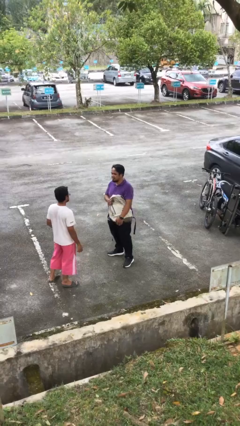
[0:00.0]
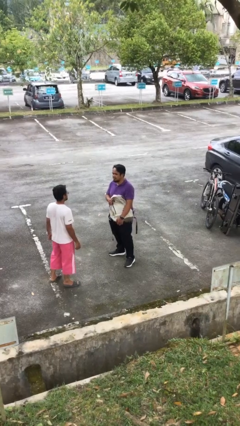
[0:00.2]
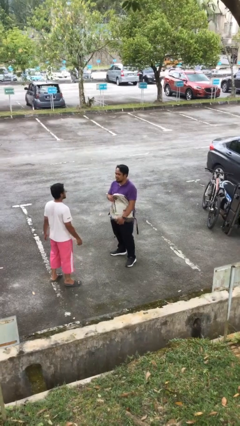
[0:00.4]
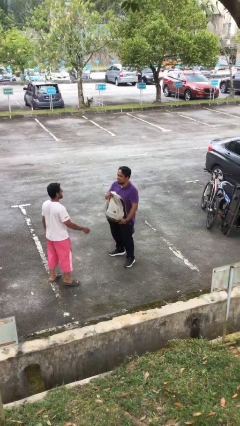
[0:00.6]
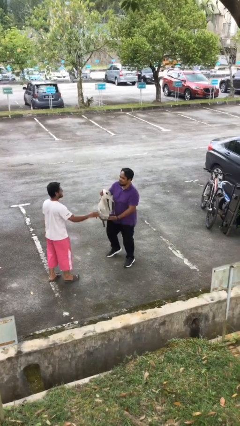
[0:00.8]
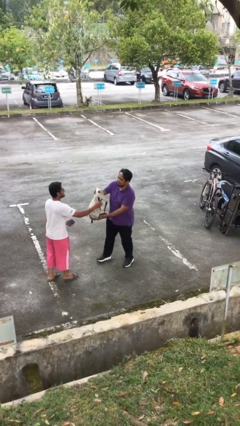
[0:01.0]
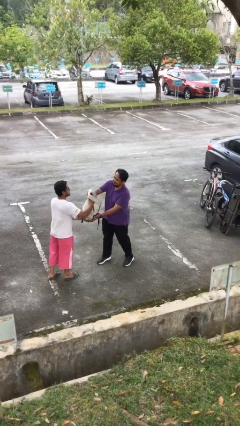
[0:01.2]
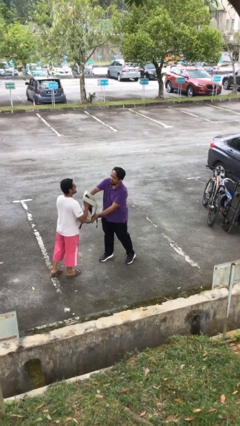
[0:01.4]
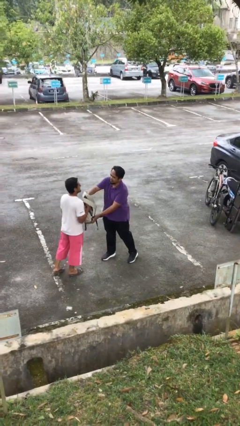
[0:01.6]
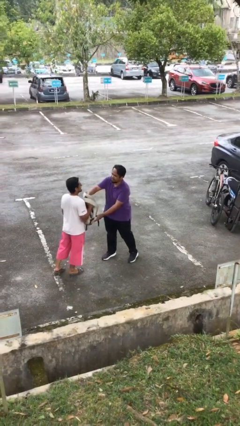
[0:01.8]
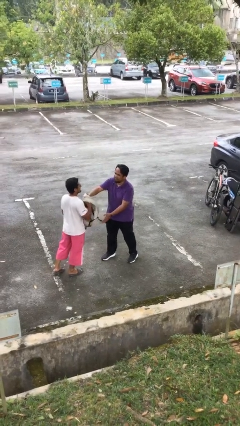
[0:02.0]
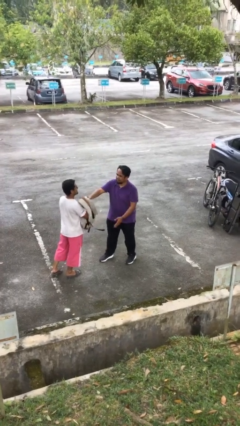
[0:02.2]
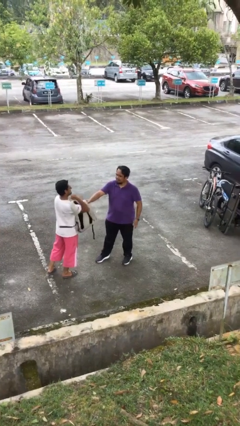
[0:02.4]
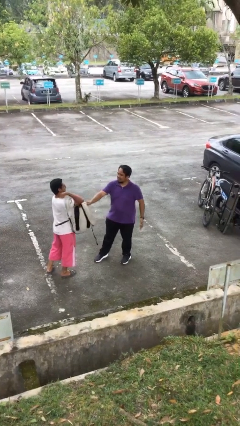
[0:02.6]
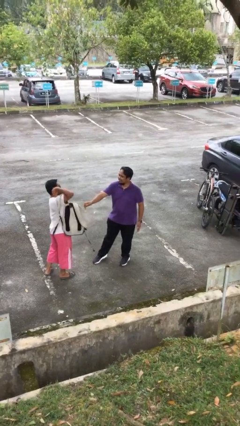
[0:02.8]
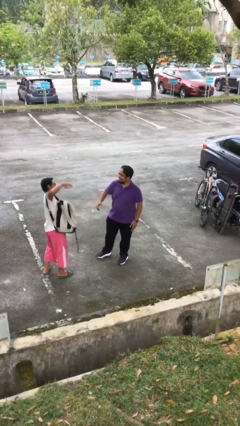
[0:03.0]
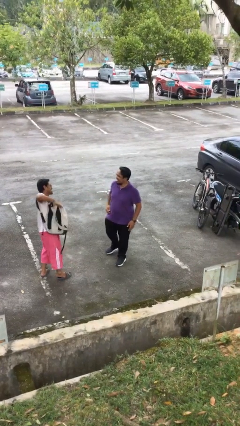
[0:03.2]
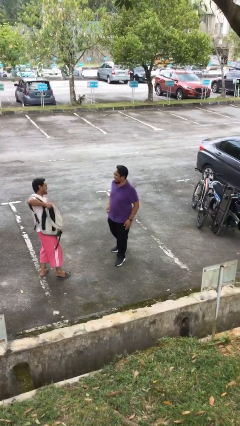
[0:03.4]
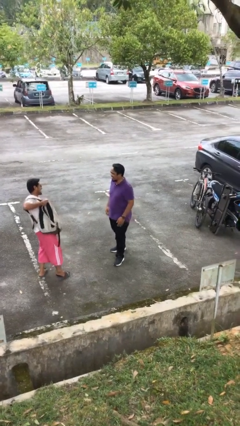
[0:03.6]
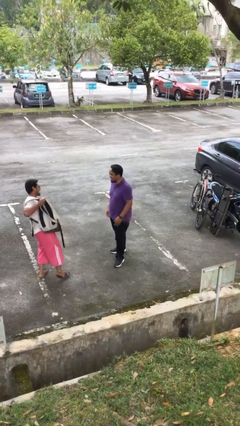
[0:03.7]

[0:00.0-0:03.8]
person transfers object to person

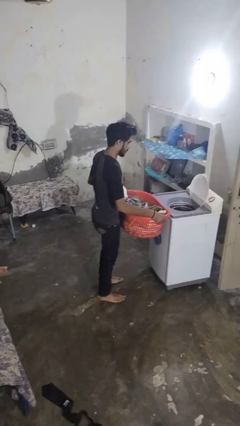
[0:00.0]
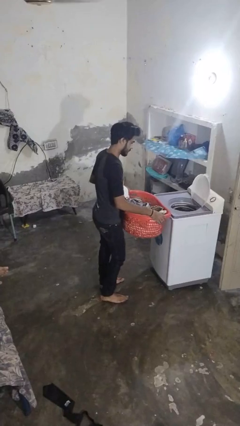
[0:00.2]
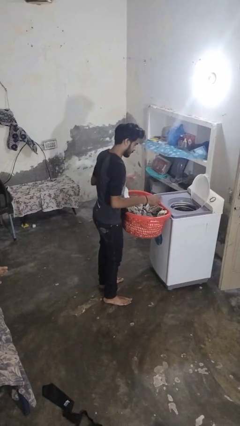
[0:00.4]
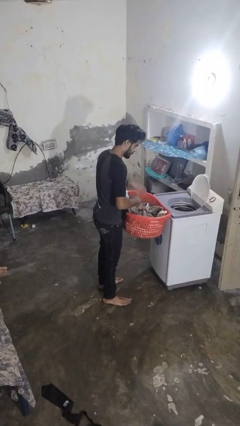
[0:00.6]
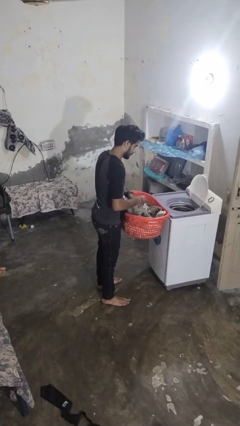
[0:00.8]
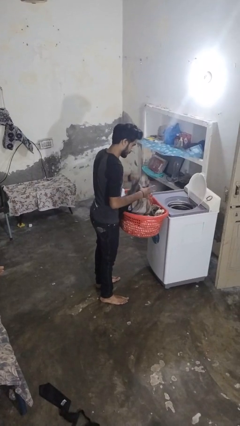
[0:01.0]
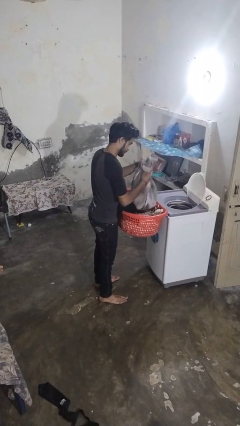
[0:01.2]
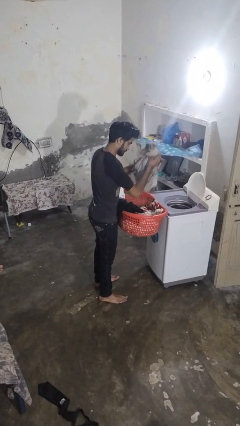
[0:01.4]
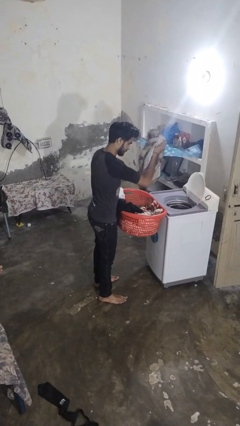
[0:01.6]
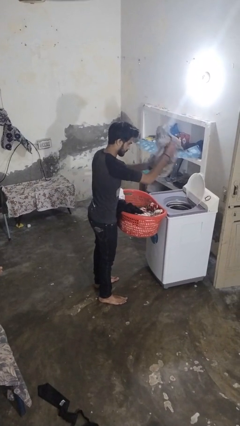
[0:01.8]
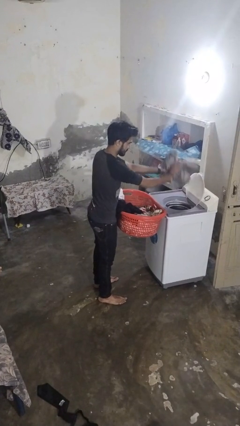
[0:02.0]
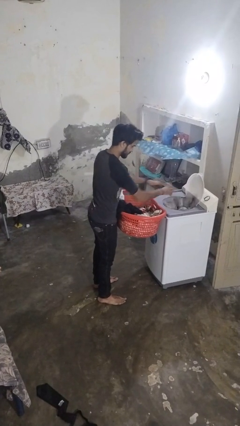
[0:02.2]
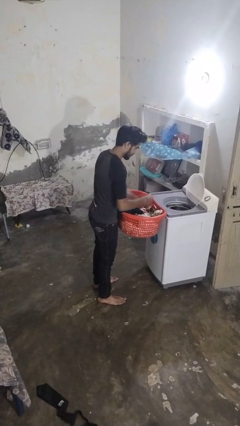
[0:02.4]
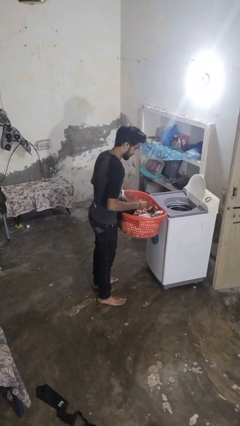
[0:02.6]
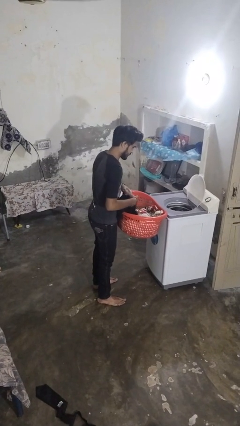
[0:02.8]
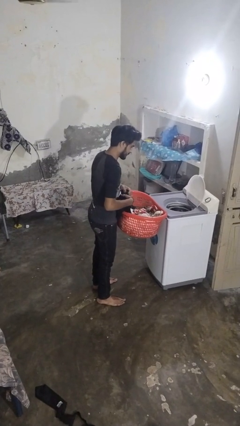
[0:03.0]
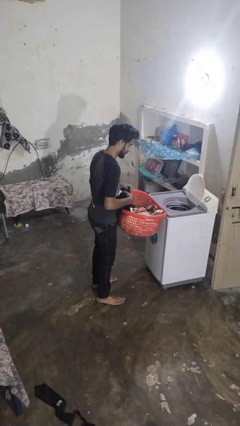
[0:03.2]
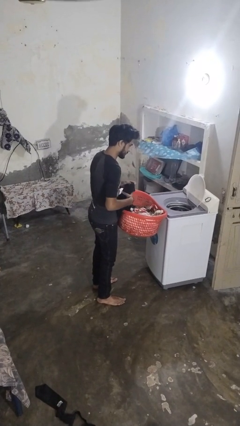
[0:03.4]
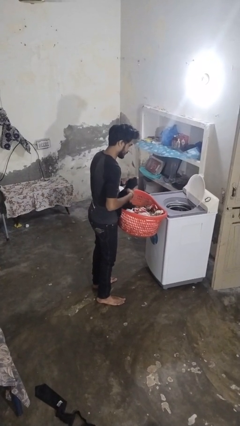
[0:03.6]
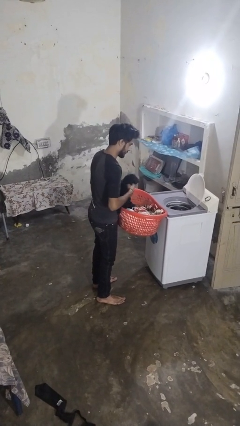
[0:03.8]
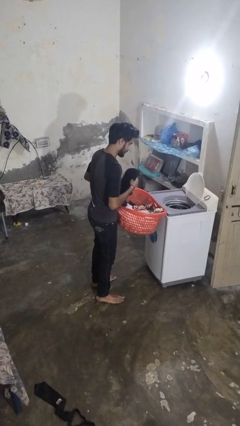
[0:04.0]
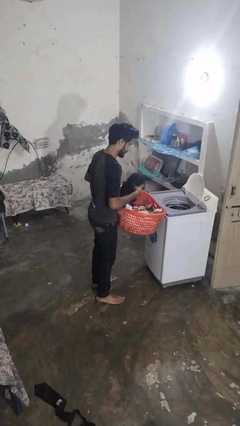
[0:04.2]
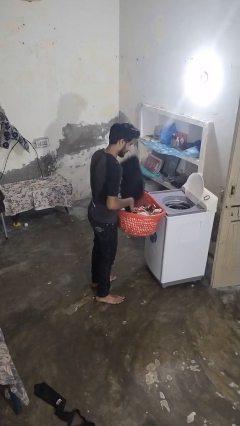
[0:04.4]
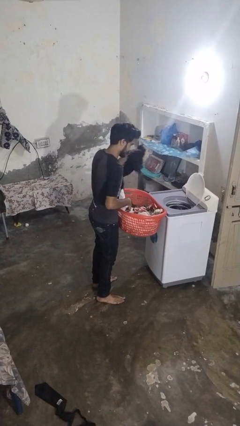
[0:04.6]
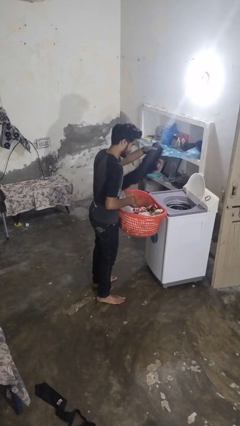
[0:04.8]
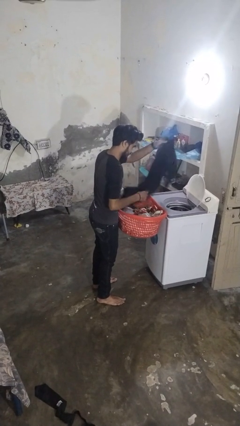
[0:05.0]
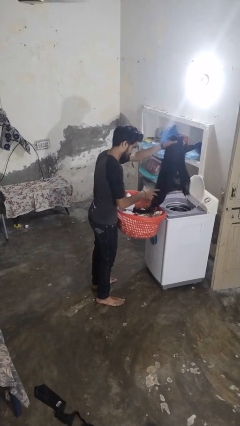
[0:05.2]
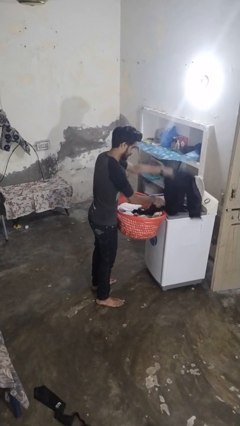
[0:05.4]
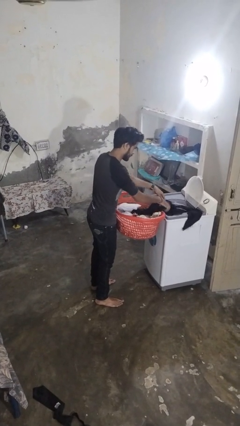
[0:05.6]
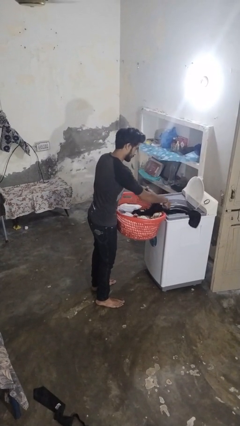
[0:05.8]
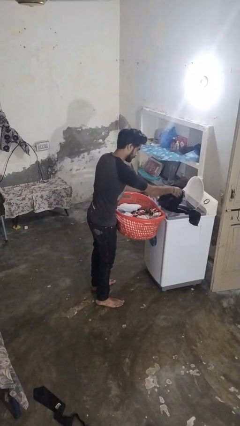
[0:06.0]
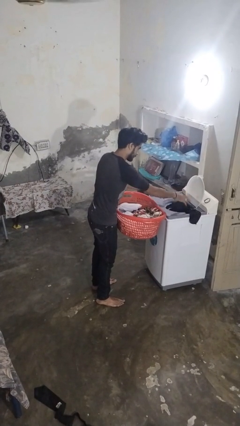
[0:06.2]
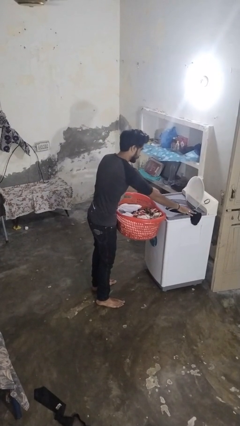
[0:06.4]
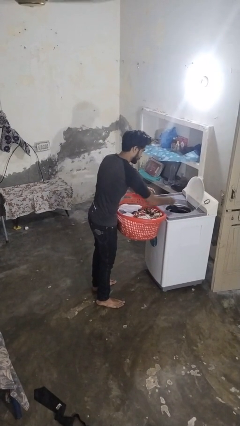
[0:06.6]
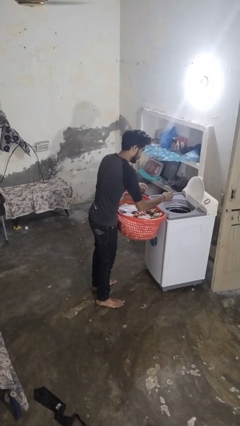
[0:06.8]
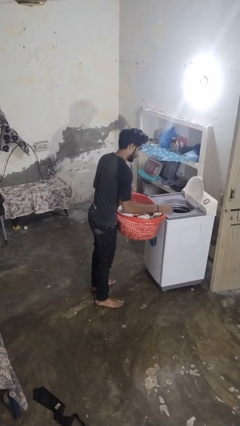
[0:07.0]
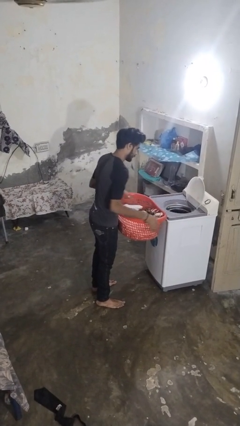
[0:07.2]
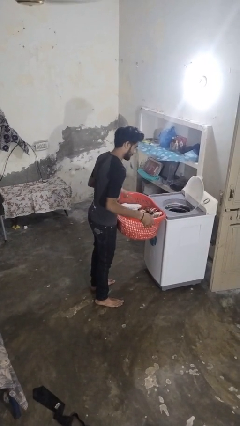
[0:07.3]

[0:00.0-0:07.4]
person loads dryer

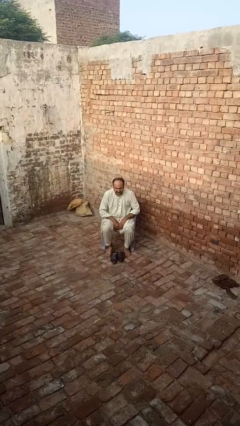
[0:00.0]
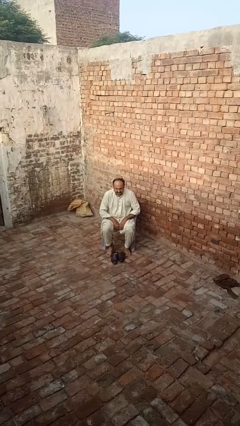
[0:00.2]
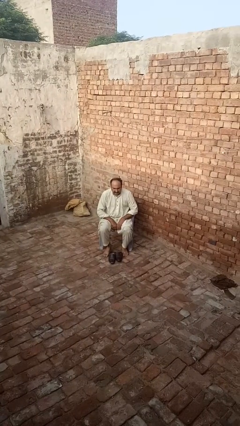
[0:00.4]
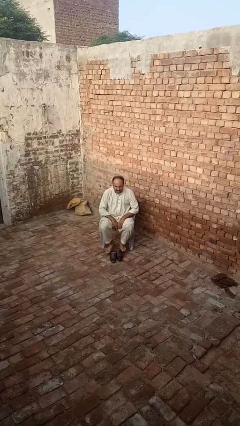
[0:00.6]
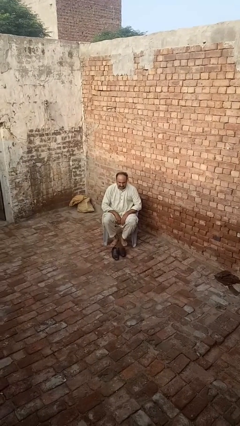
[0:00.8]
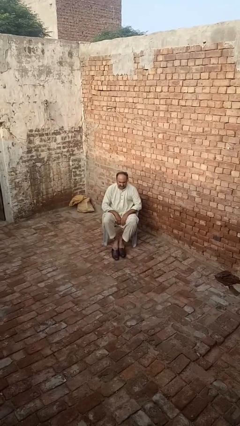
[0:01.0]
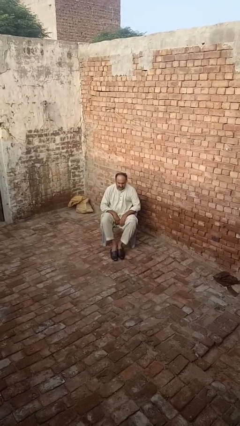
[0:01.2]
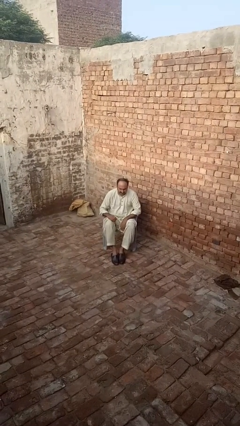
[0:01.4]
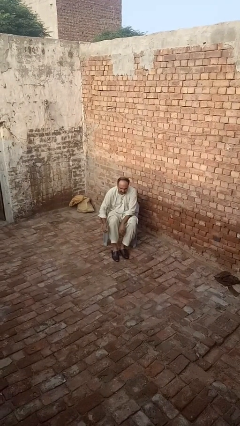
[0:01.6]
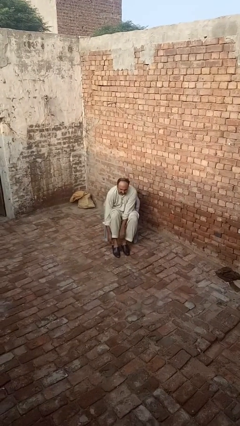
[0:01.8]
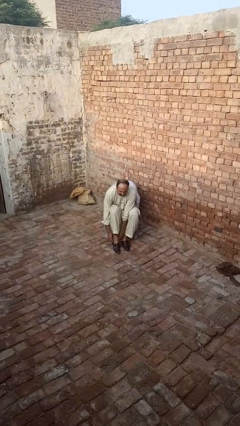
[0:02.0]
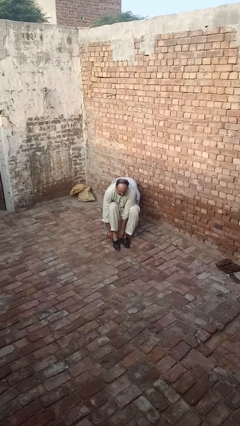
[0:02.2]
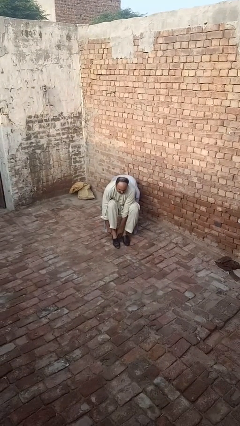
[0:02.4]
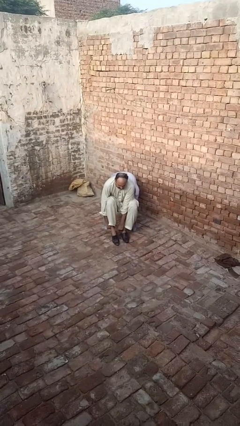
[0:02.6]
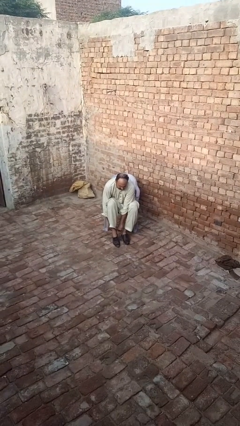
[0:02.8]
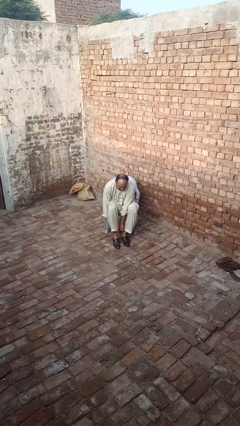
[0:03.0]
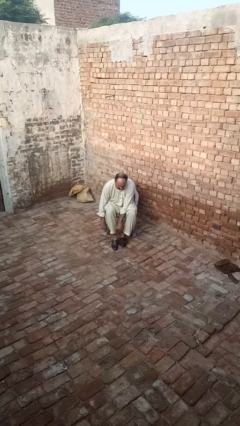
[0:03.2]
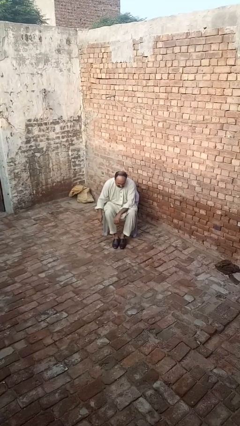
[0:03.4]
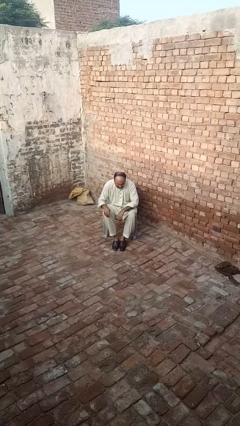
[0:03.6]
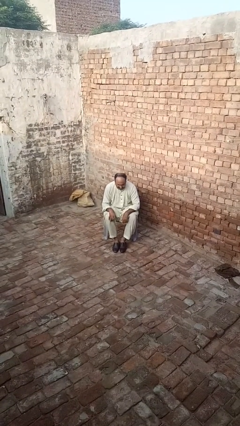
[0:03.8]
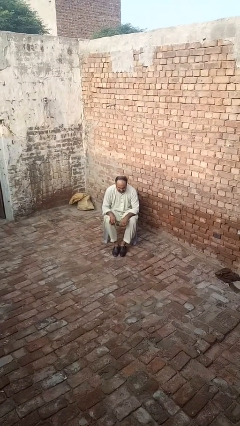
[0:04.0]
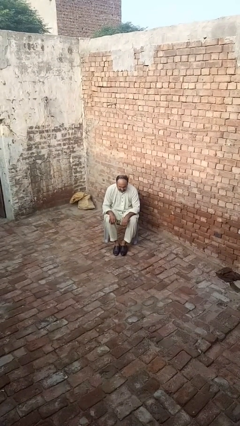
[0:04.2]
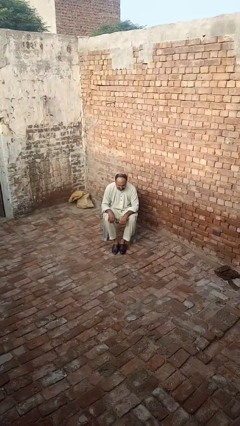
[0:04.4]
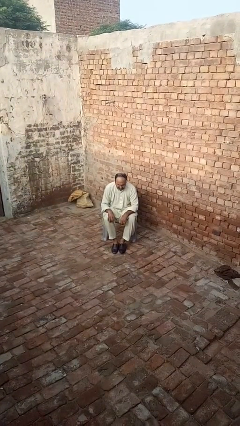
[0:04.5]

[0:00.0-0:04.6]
person puts on shoes

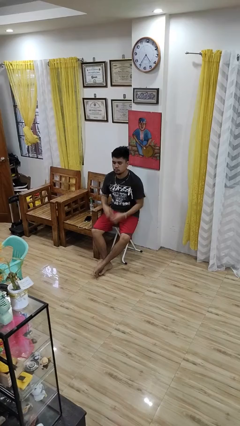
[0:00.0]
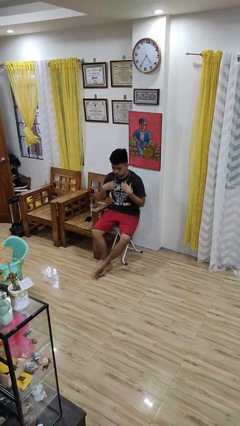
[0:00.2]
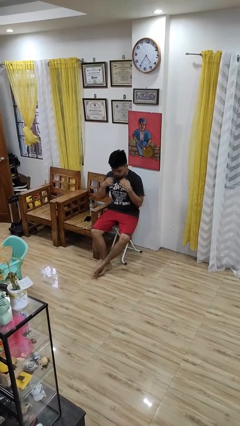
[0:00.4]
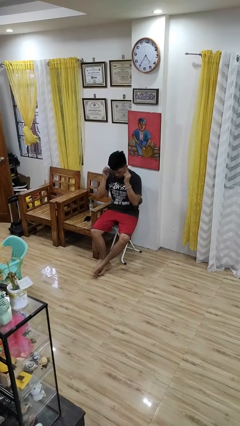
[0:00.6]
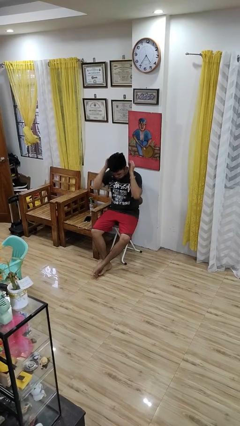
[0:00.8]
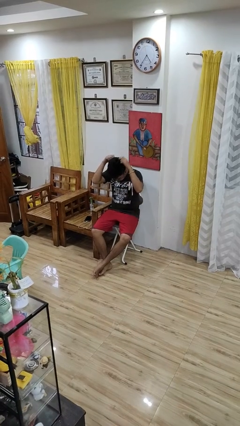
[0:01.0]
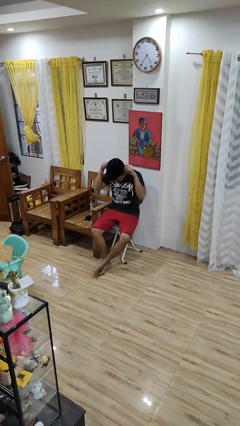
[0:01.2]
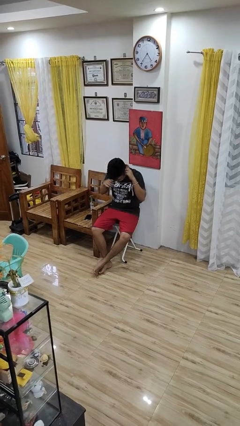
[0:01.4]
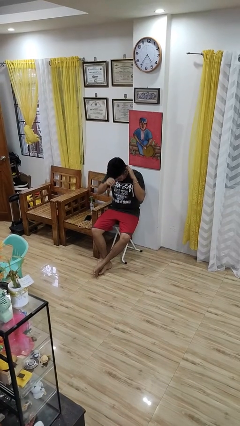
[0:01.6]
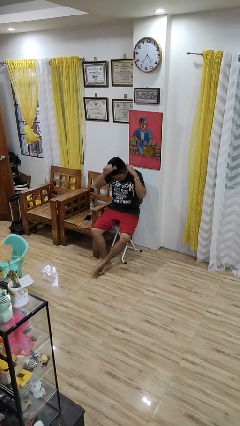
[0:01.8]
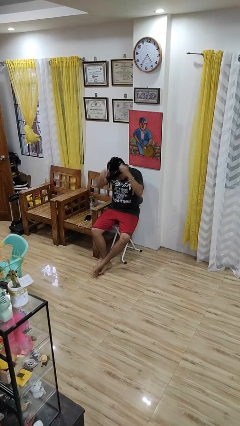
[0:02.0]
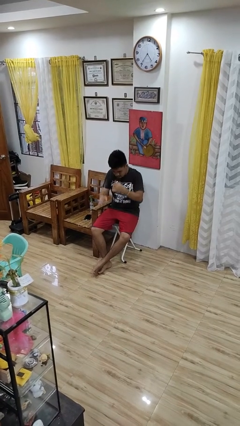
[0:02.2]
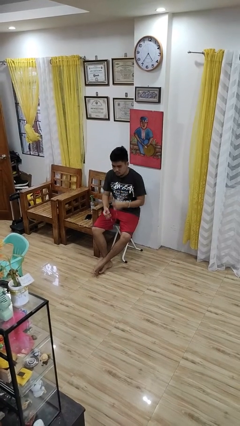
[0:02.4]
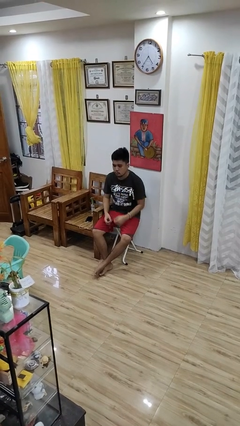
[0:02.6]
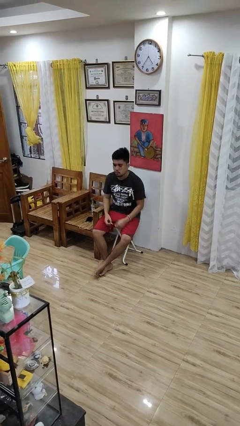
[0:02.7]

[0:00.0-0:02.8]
person takes off necklace
